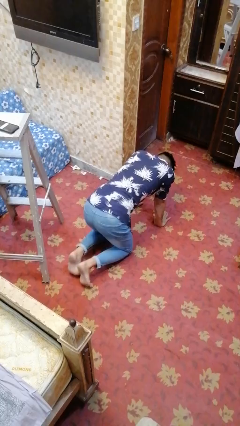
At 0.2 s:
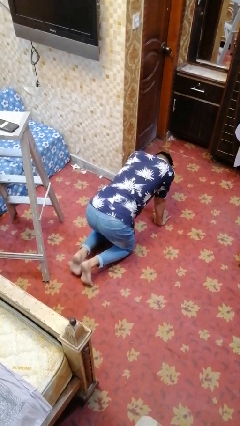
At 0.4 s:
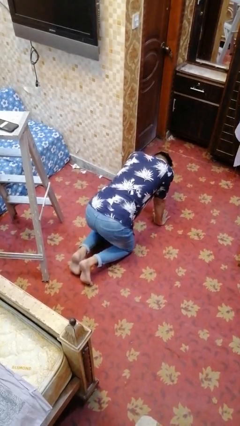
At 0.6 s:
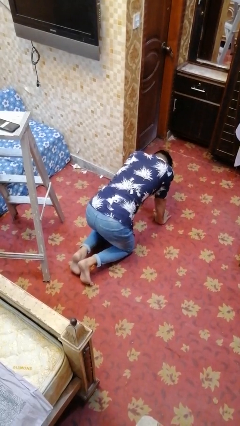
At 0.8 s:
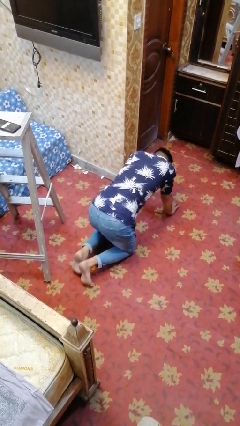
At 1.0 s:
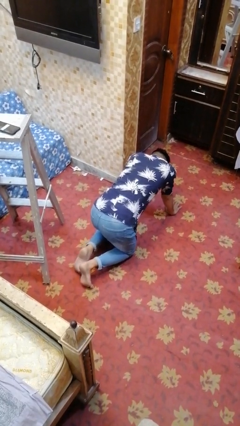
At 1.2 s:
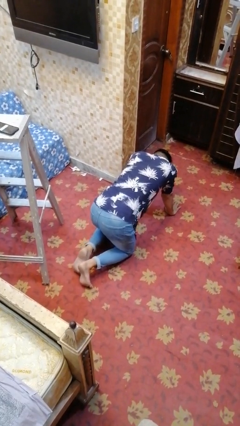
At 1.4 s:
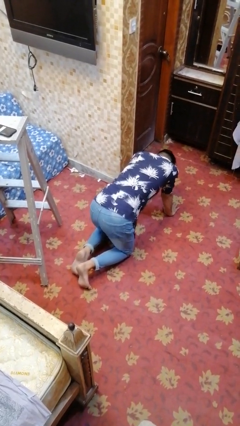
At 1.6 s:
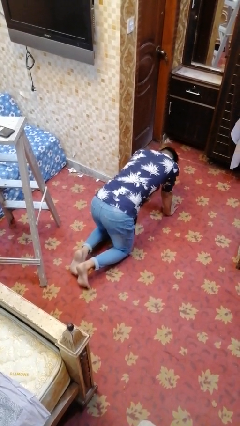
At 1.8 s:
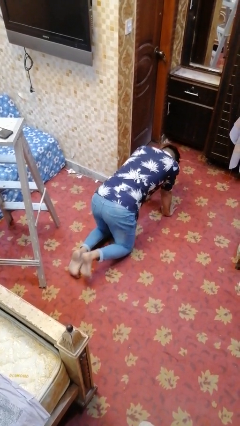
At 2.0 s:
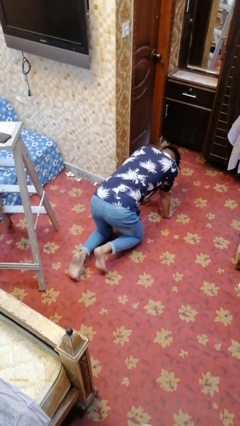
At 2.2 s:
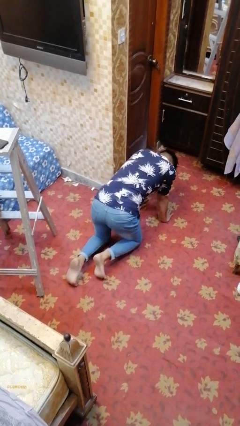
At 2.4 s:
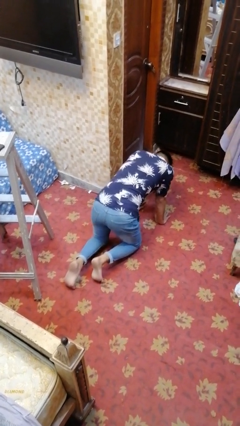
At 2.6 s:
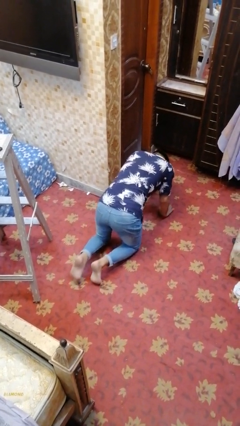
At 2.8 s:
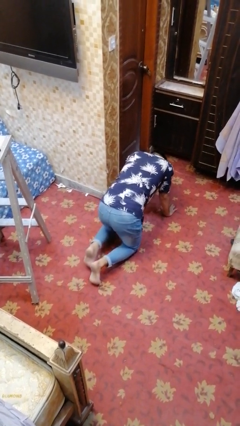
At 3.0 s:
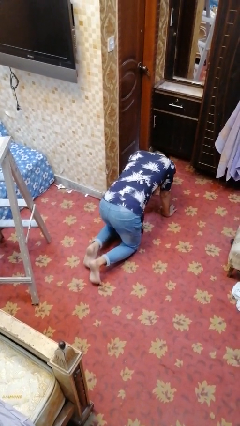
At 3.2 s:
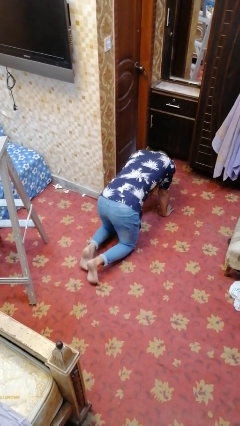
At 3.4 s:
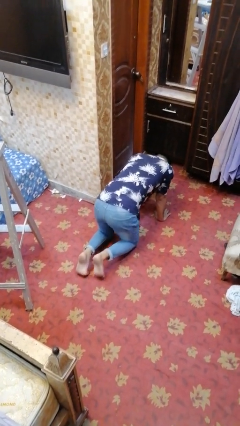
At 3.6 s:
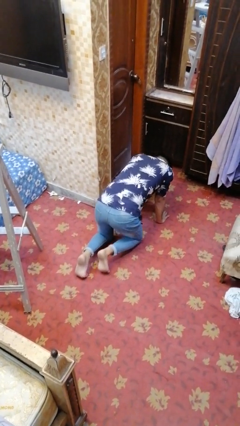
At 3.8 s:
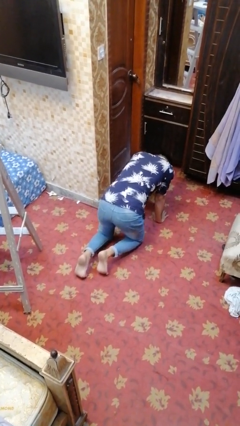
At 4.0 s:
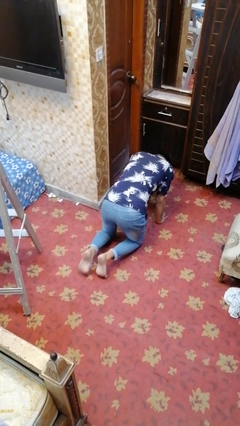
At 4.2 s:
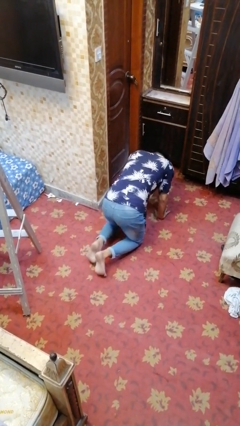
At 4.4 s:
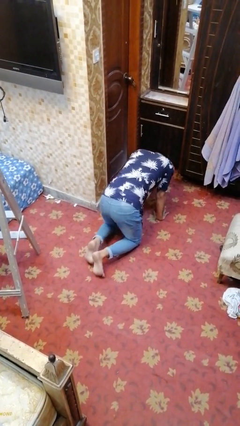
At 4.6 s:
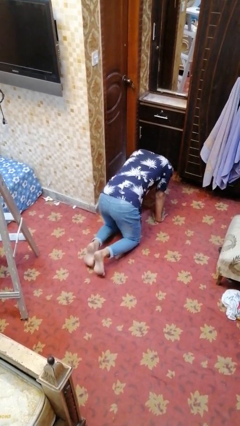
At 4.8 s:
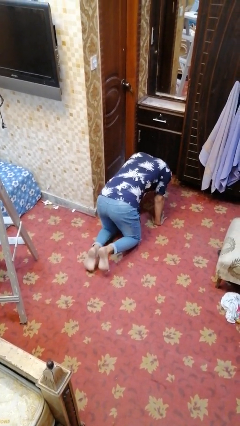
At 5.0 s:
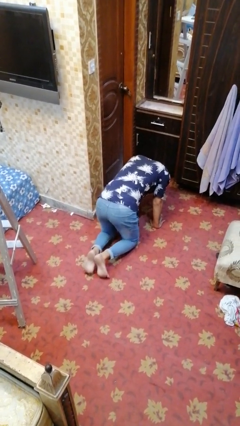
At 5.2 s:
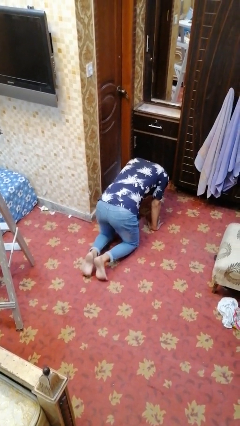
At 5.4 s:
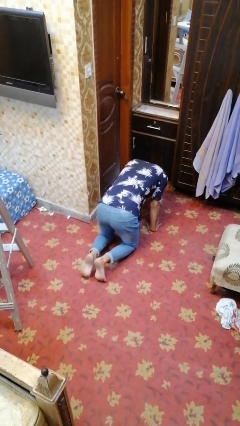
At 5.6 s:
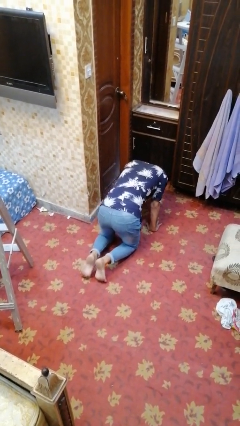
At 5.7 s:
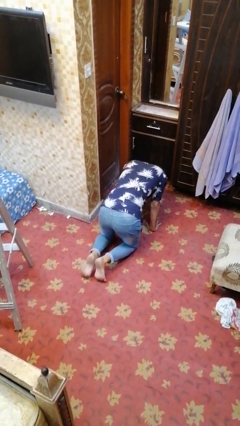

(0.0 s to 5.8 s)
person crawls

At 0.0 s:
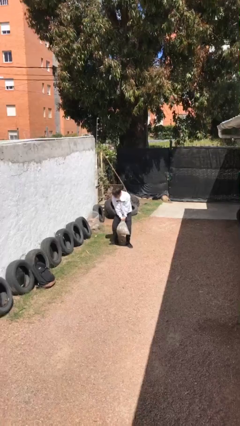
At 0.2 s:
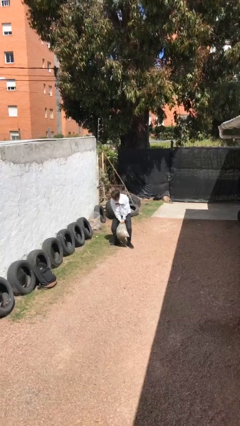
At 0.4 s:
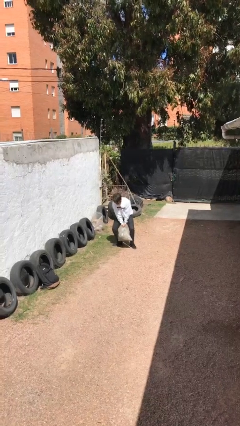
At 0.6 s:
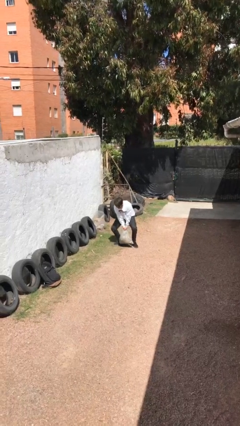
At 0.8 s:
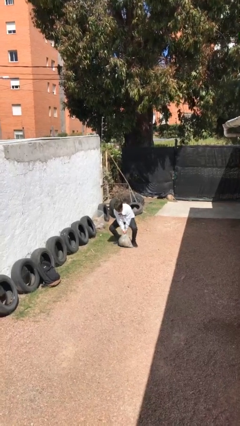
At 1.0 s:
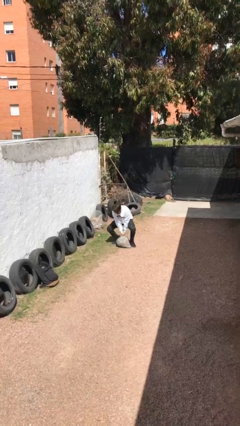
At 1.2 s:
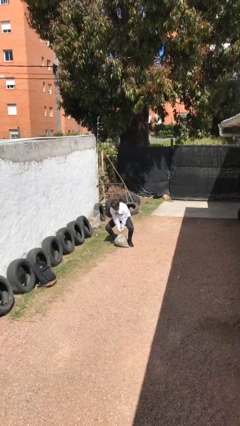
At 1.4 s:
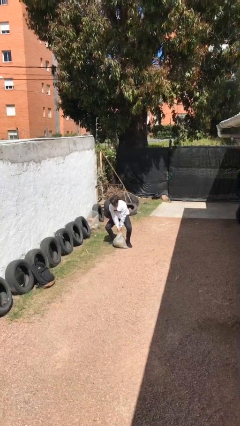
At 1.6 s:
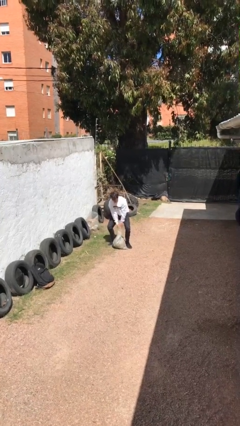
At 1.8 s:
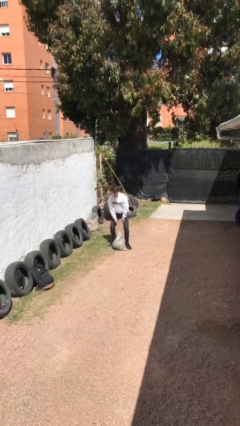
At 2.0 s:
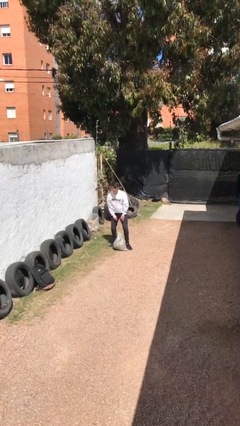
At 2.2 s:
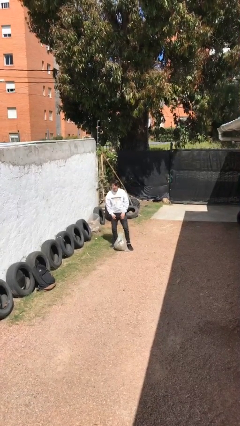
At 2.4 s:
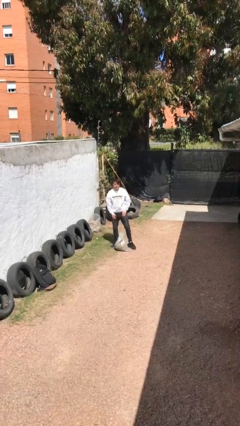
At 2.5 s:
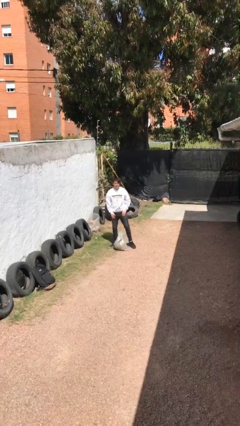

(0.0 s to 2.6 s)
person puts down object on floor

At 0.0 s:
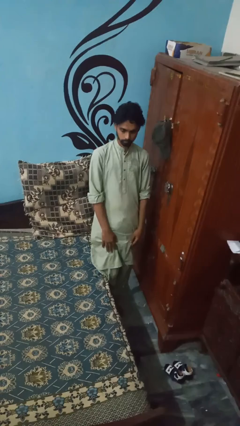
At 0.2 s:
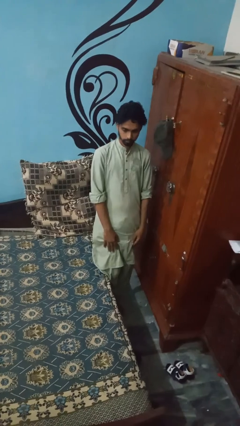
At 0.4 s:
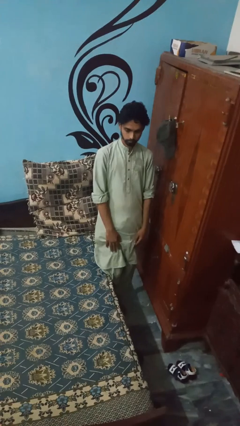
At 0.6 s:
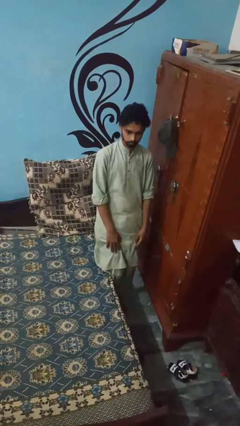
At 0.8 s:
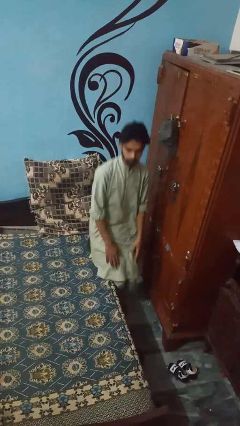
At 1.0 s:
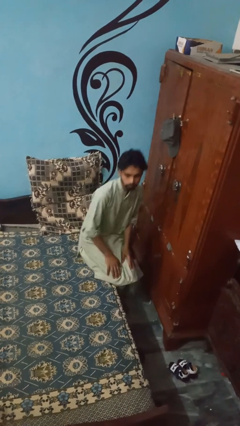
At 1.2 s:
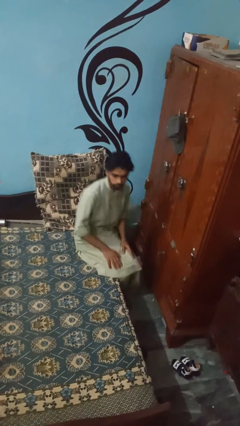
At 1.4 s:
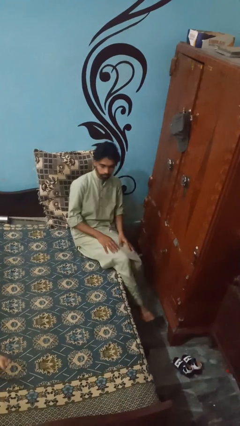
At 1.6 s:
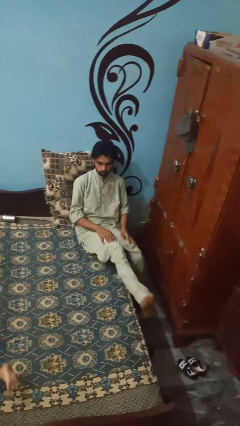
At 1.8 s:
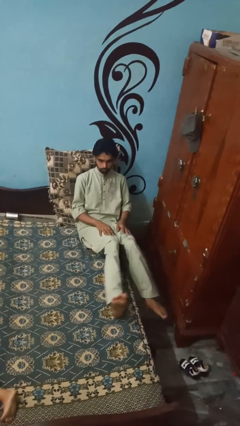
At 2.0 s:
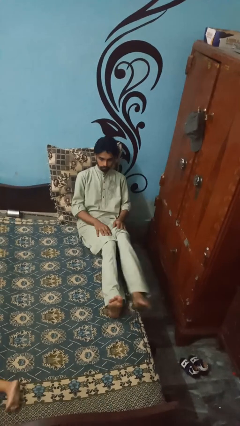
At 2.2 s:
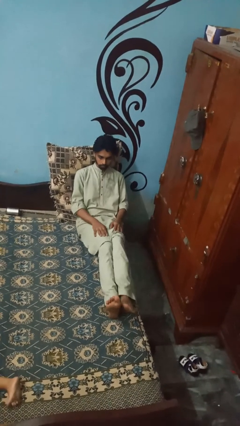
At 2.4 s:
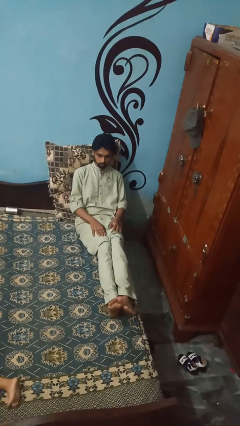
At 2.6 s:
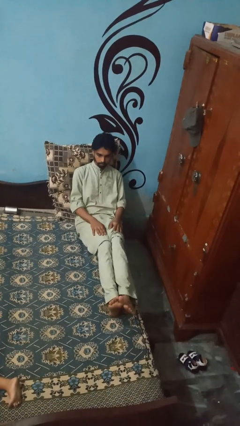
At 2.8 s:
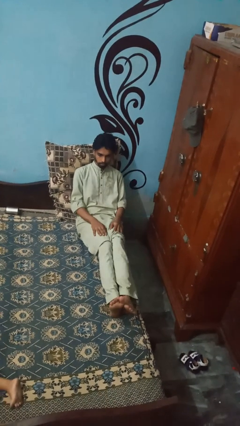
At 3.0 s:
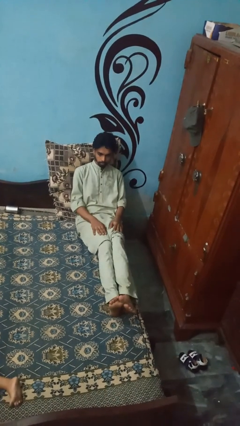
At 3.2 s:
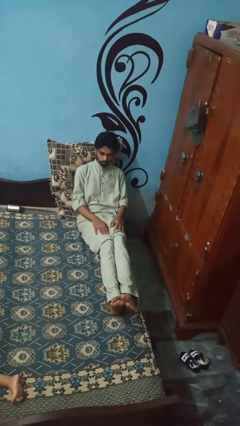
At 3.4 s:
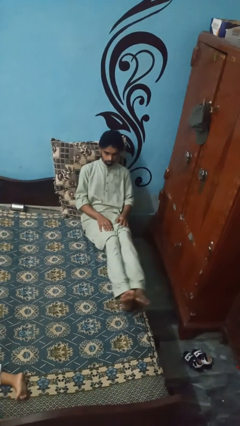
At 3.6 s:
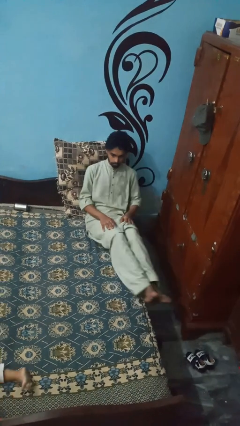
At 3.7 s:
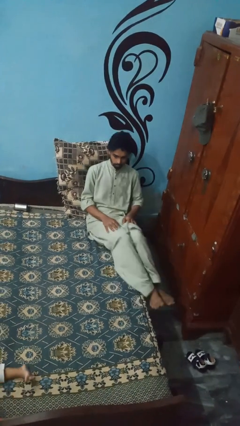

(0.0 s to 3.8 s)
person lies down on bed

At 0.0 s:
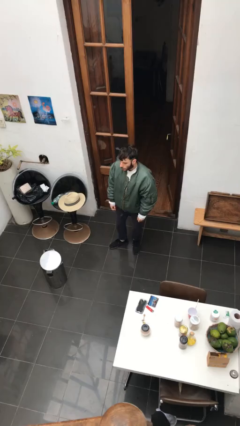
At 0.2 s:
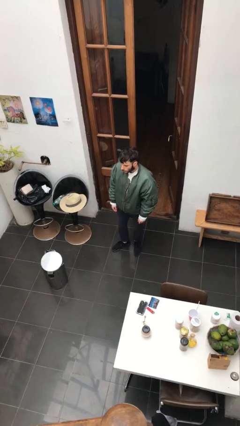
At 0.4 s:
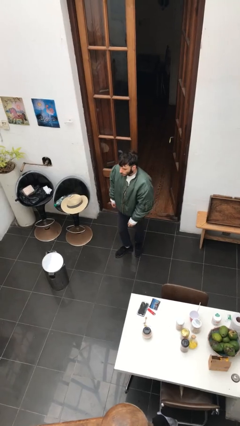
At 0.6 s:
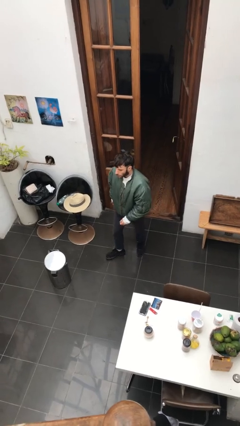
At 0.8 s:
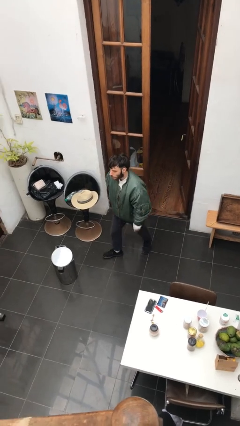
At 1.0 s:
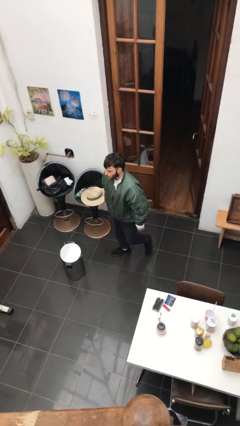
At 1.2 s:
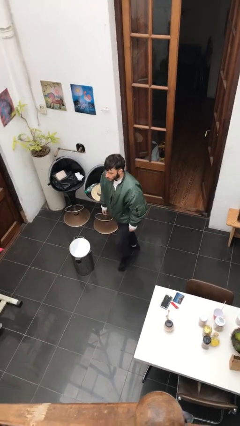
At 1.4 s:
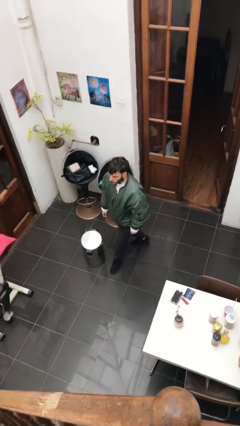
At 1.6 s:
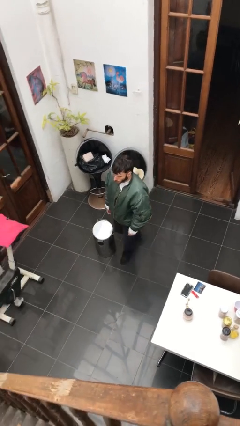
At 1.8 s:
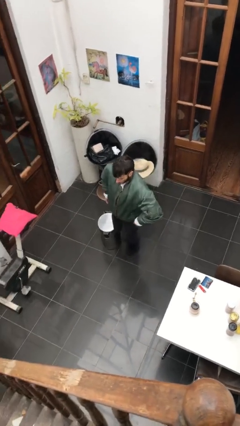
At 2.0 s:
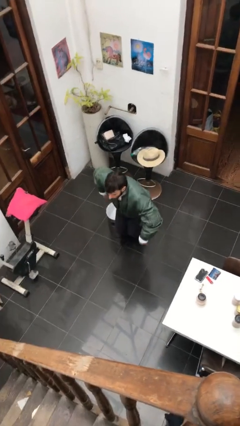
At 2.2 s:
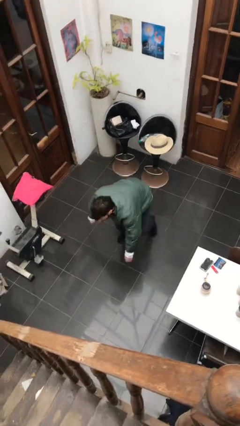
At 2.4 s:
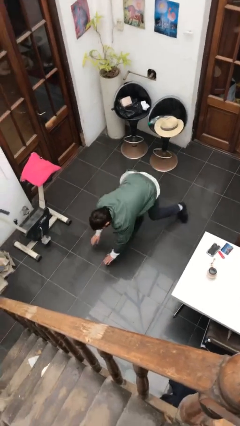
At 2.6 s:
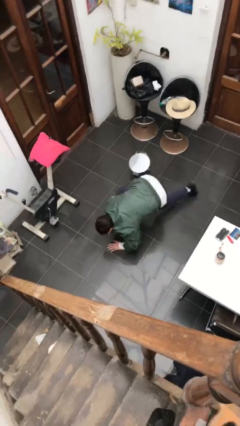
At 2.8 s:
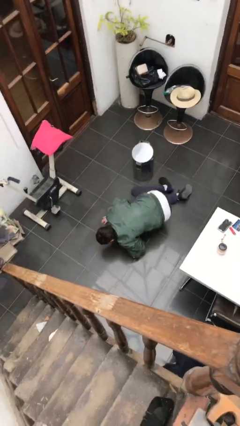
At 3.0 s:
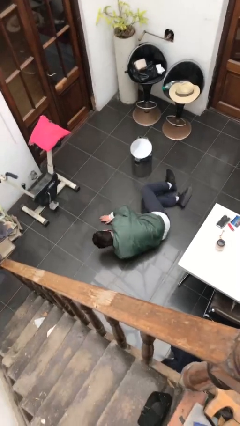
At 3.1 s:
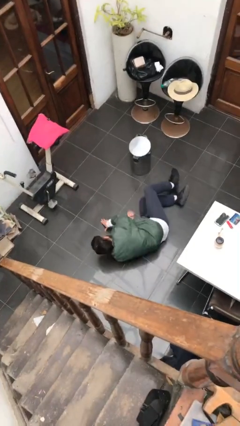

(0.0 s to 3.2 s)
person trips on object on floor

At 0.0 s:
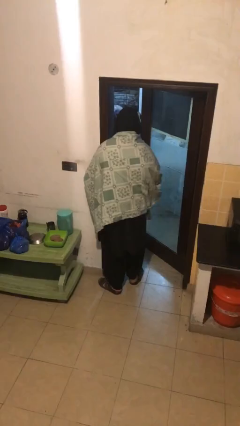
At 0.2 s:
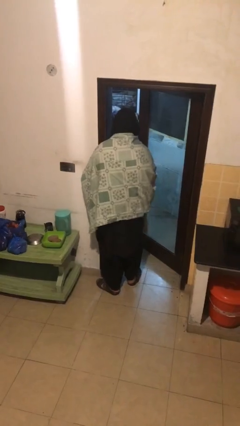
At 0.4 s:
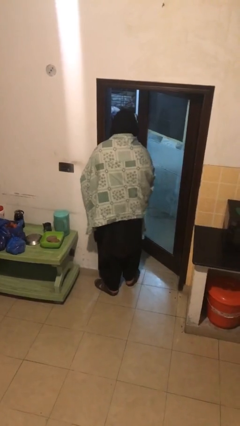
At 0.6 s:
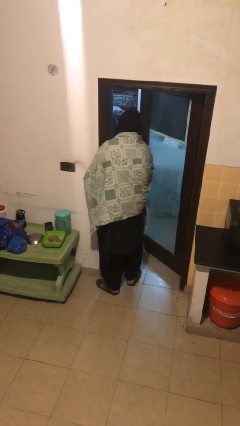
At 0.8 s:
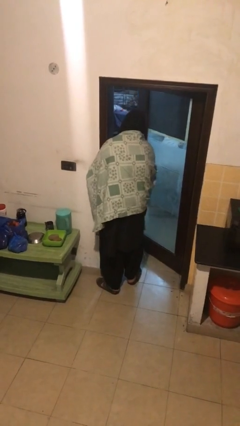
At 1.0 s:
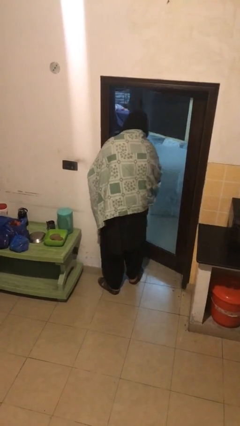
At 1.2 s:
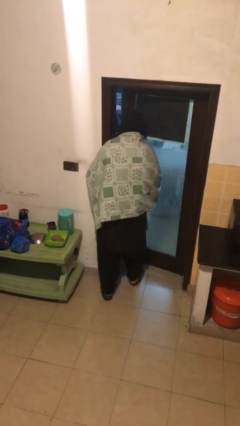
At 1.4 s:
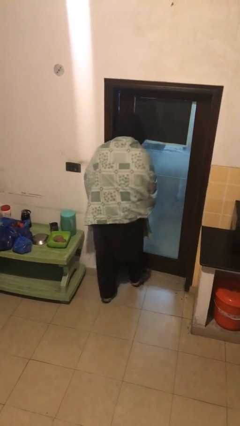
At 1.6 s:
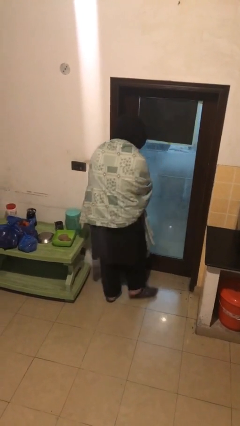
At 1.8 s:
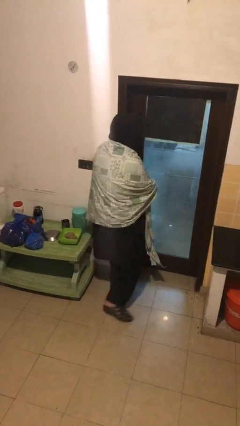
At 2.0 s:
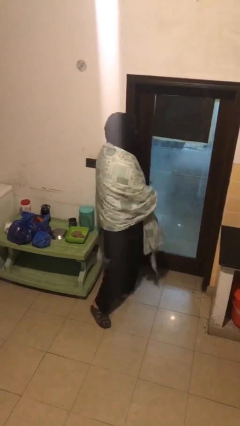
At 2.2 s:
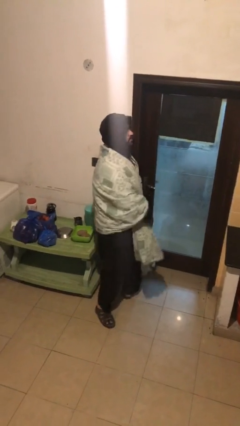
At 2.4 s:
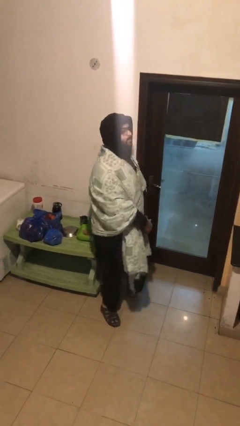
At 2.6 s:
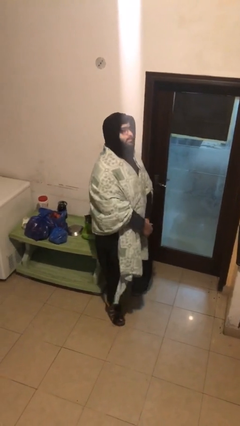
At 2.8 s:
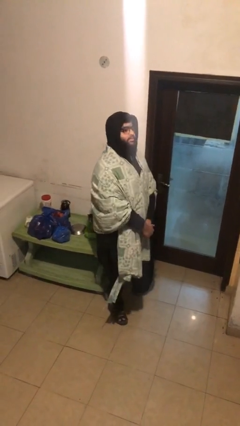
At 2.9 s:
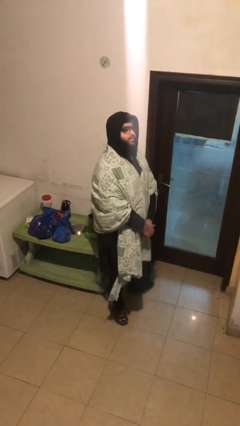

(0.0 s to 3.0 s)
person closes facility door
